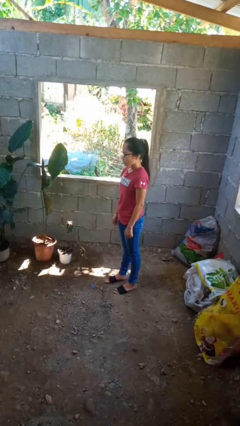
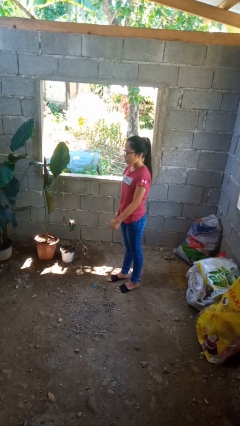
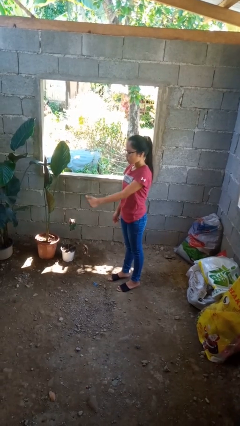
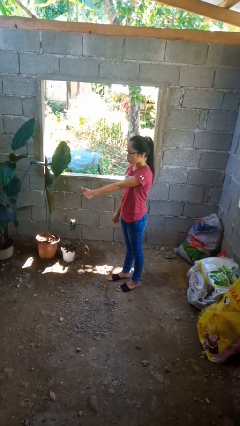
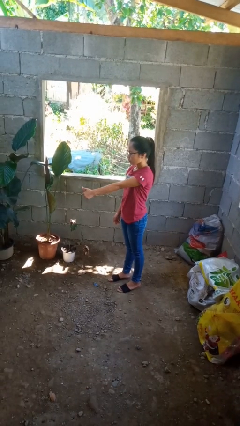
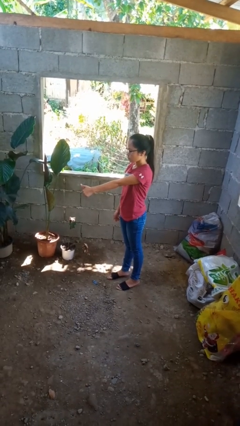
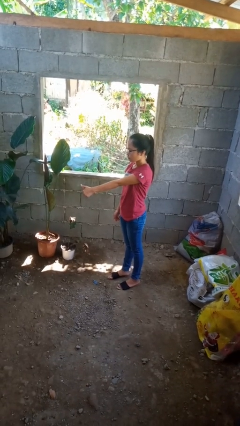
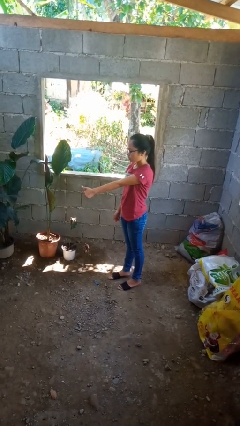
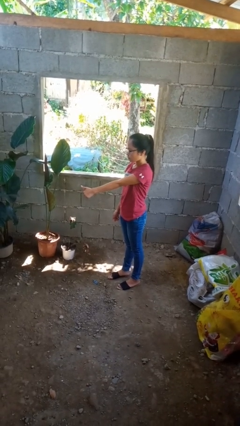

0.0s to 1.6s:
person gestures thumbs up

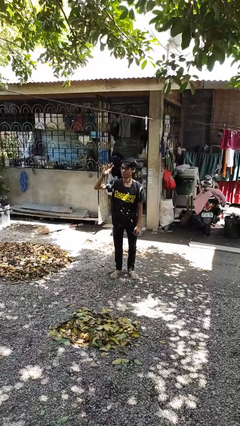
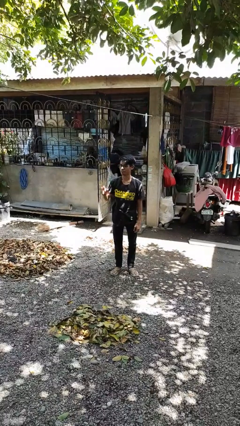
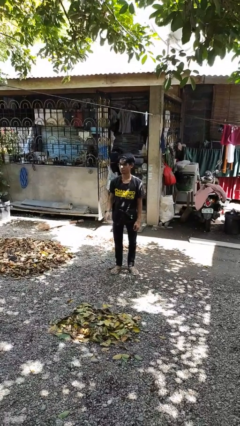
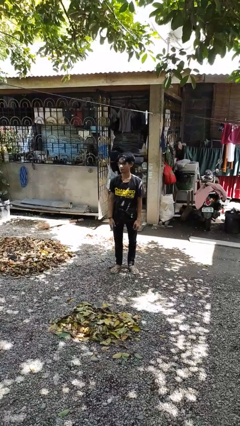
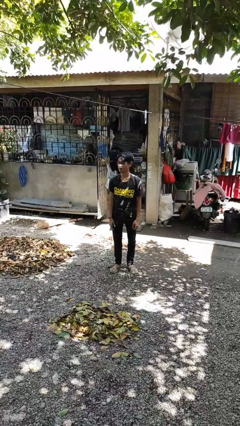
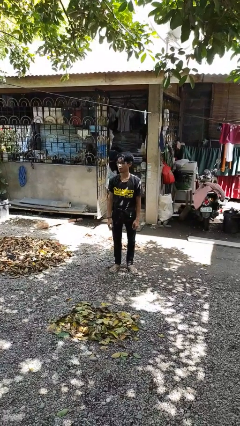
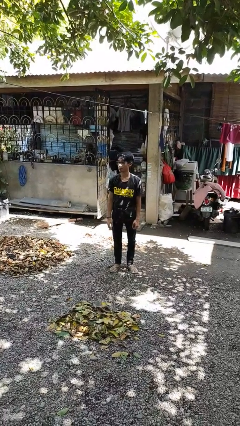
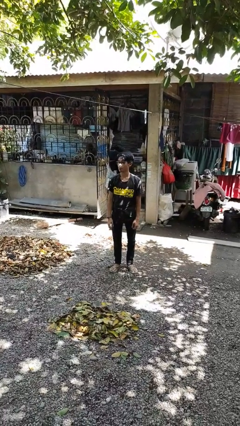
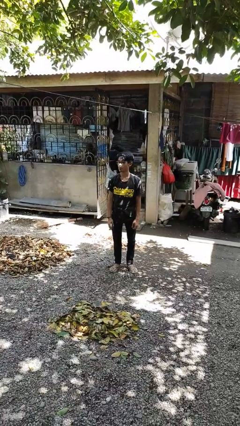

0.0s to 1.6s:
person gestures lower hand

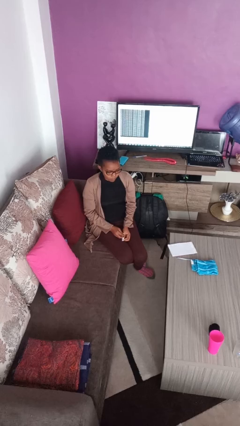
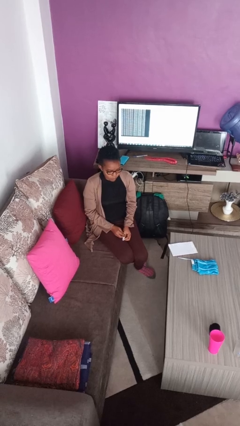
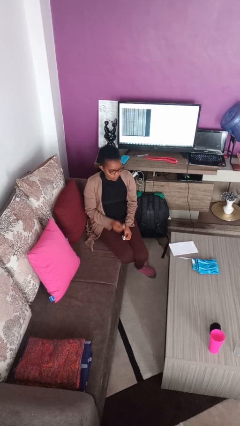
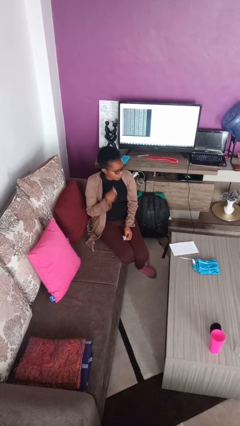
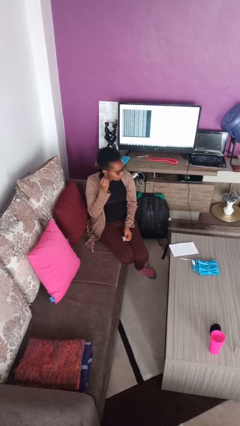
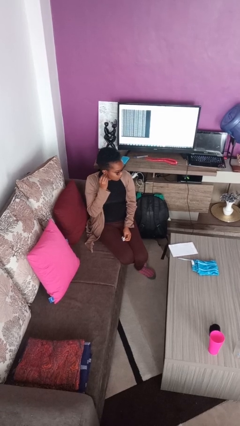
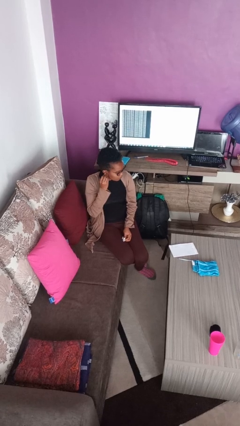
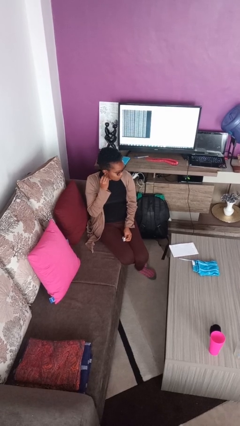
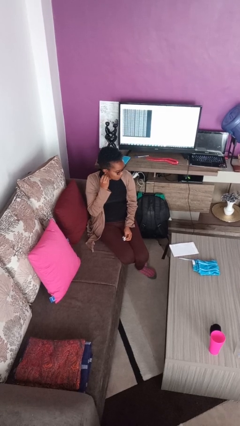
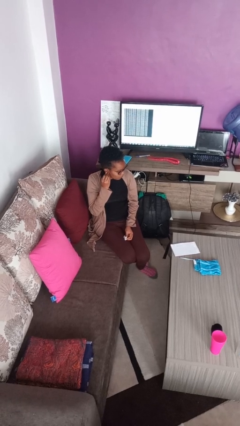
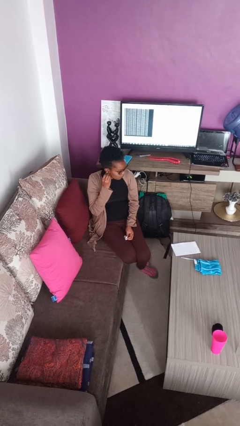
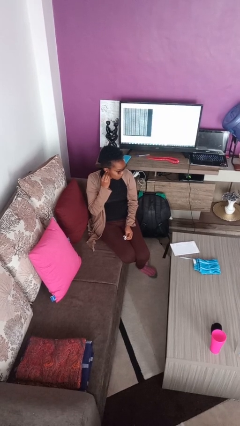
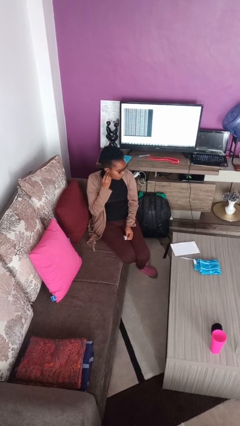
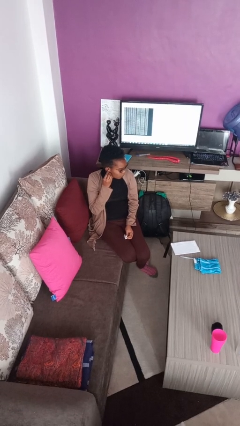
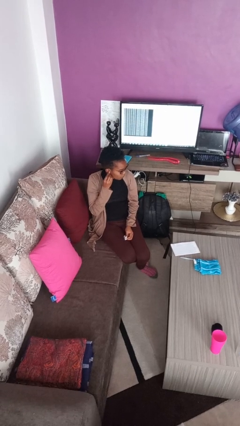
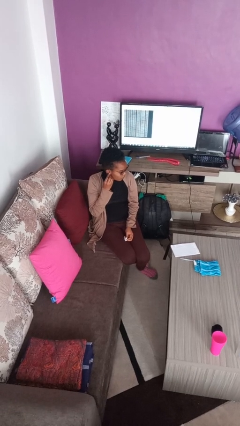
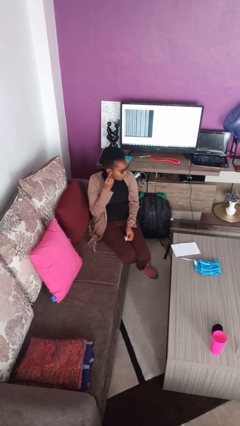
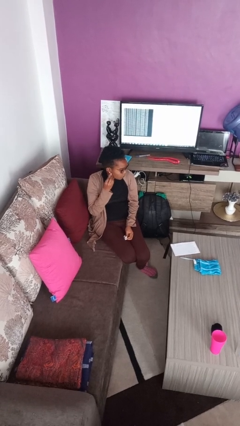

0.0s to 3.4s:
person puts on earrings

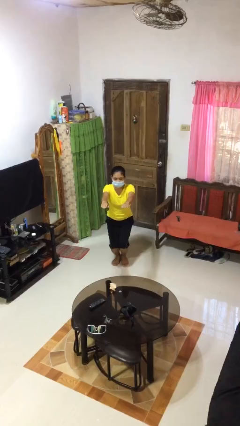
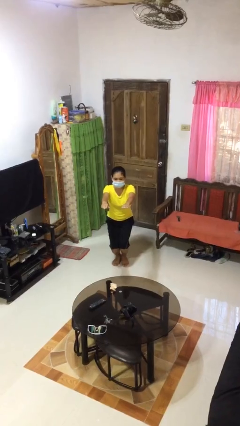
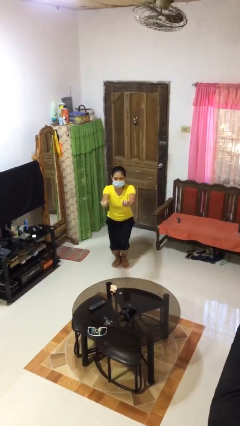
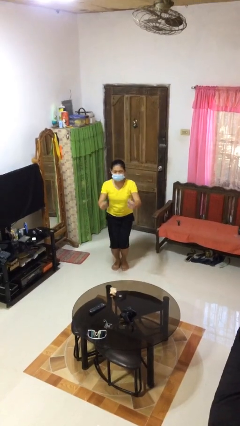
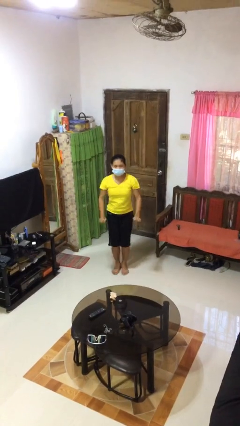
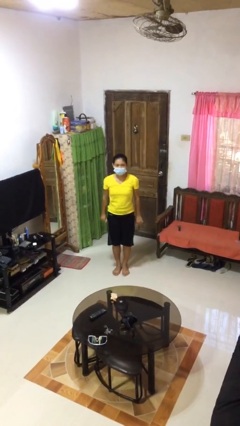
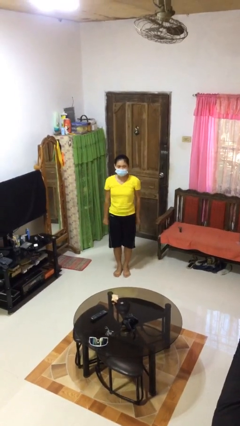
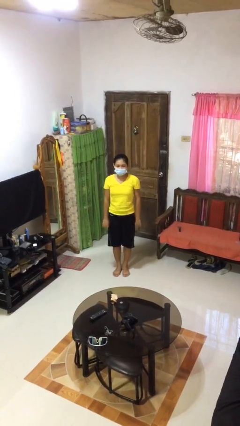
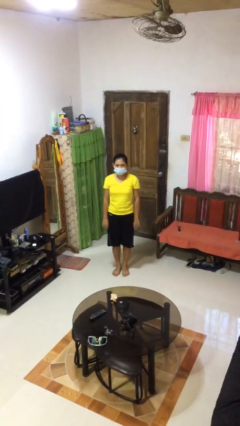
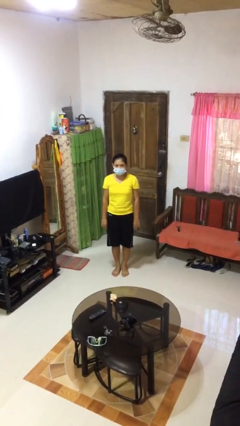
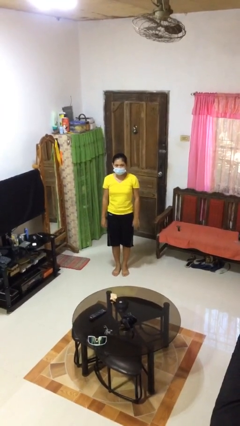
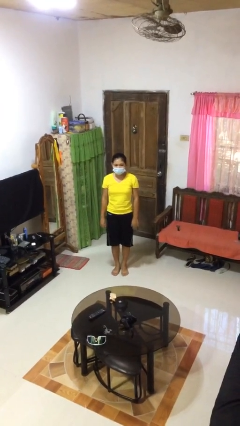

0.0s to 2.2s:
person stands up

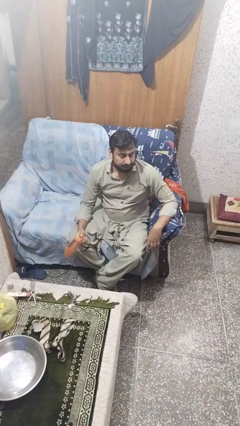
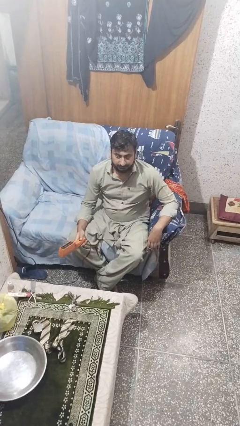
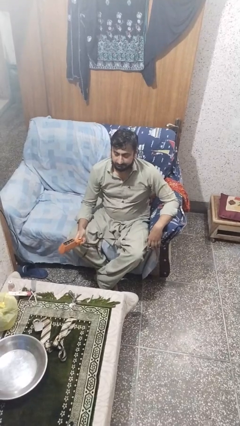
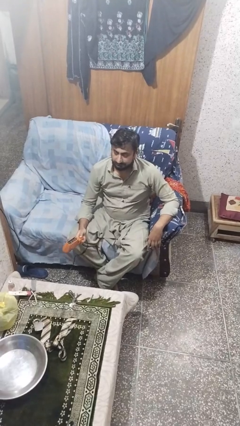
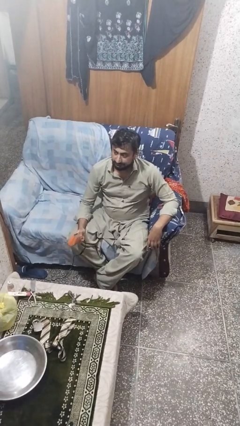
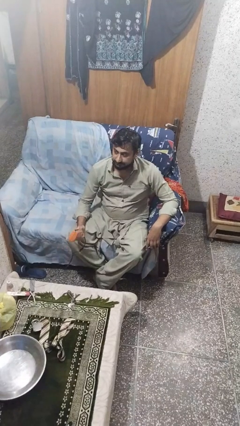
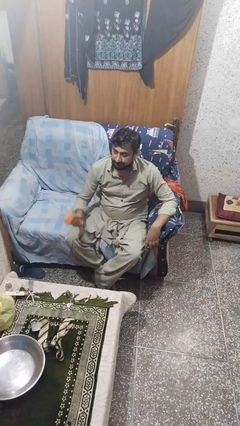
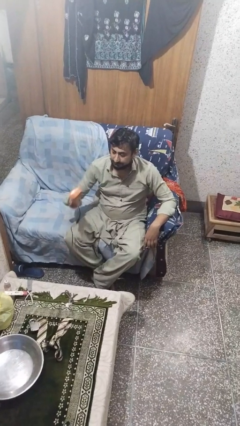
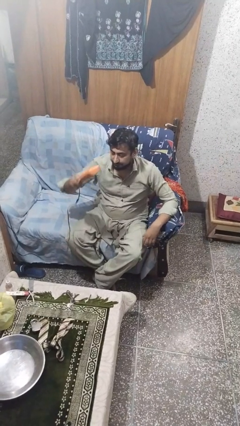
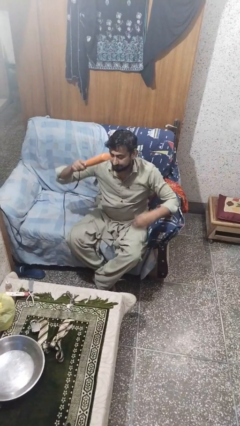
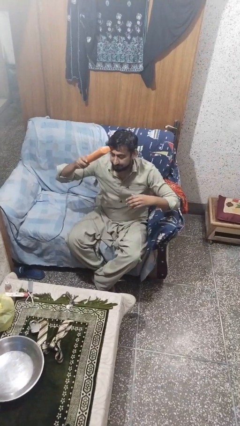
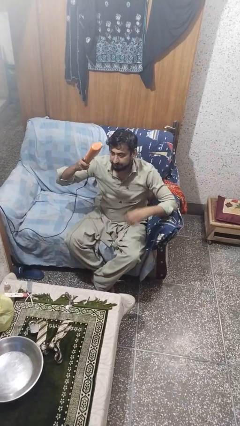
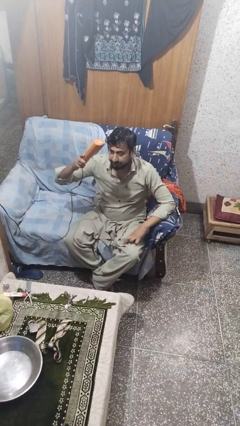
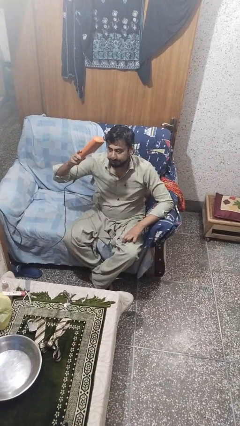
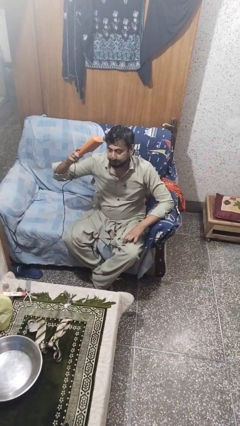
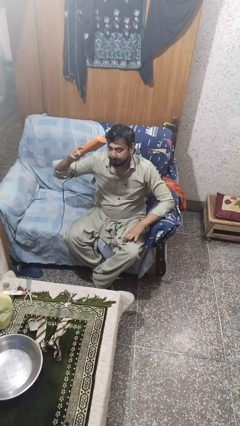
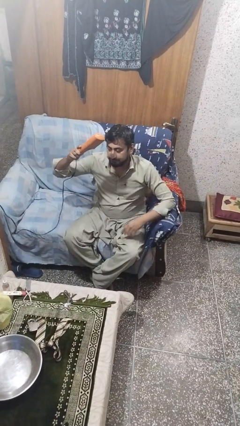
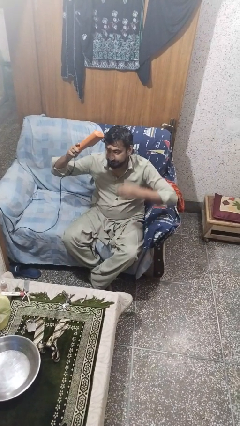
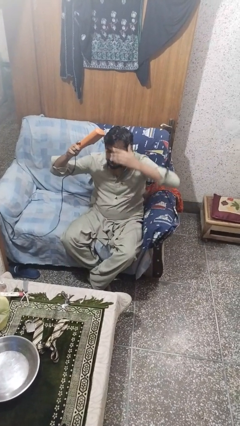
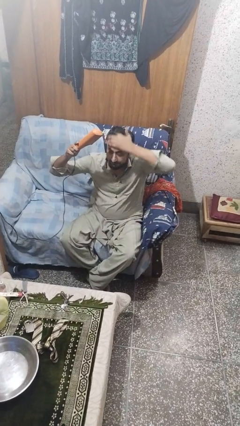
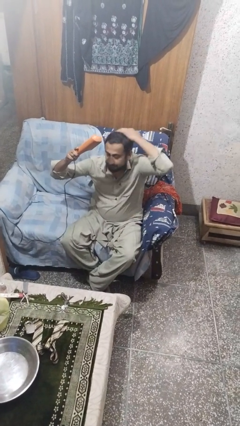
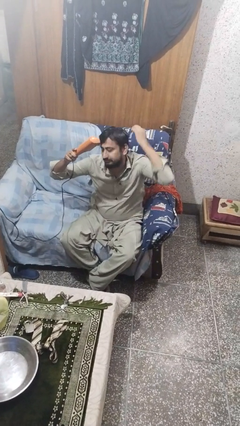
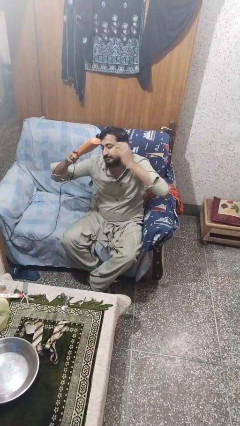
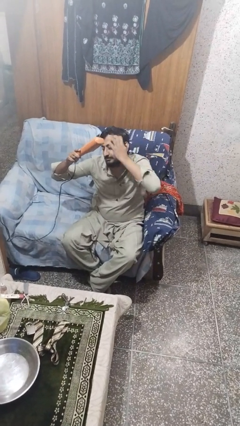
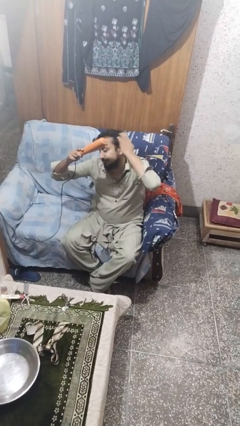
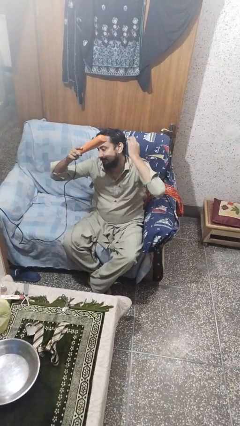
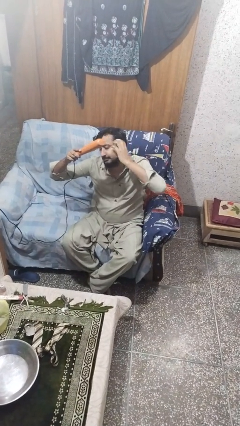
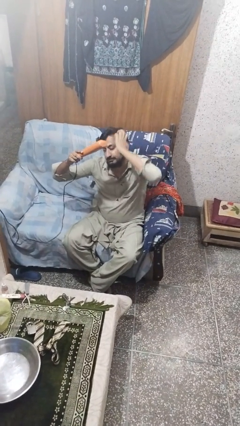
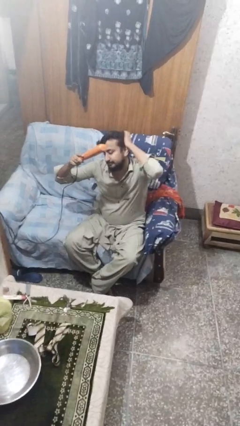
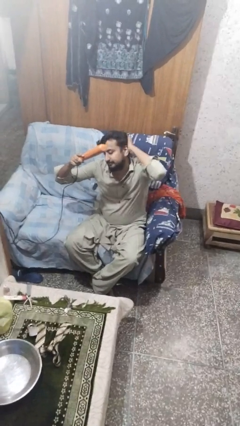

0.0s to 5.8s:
person dries hair with hairdryer

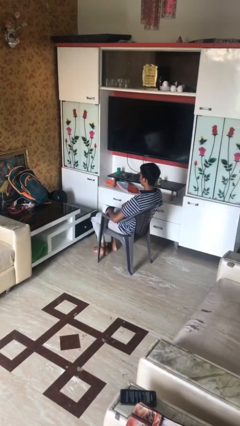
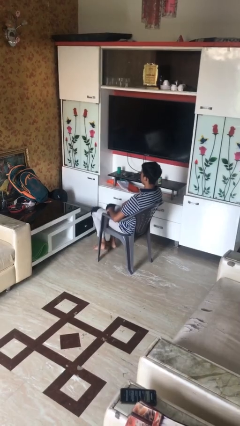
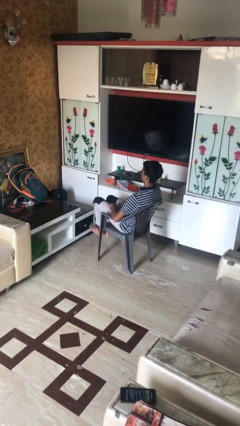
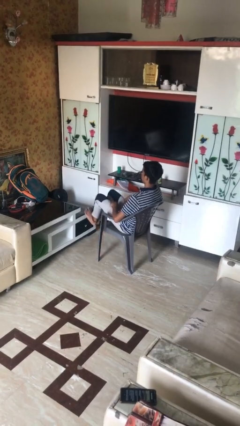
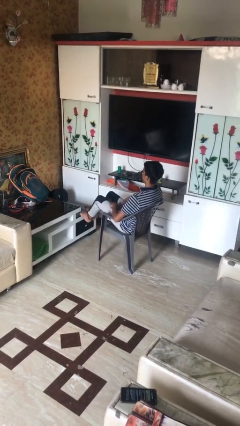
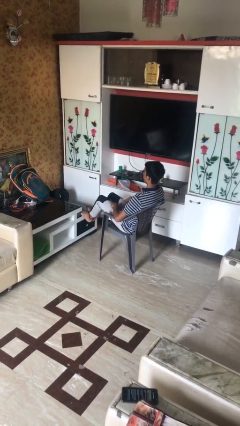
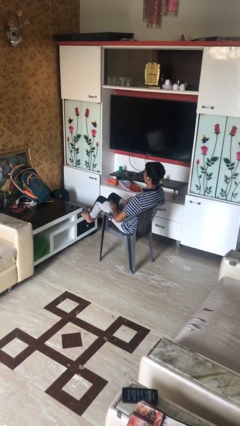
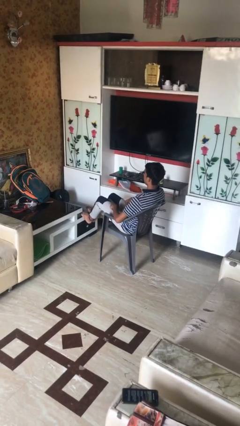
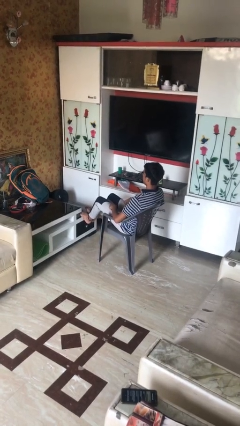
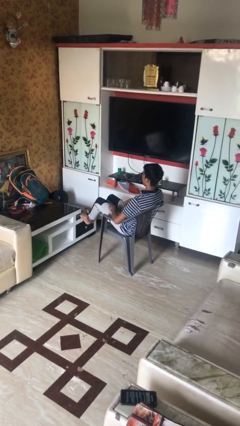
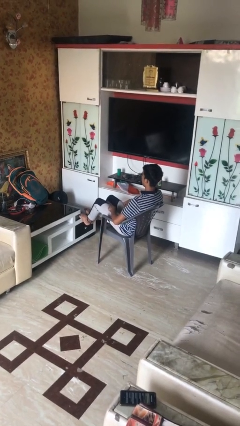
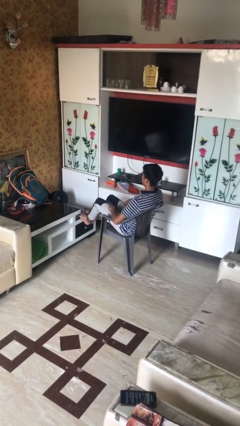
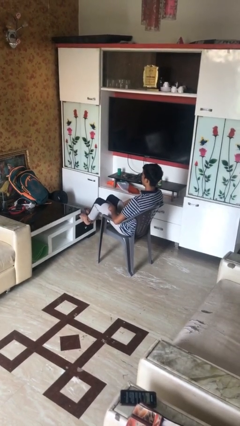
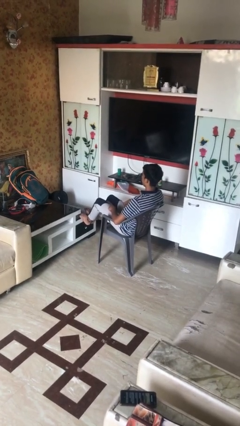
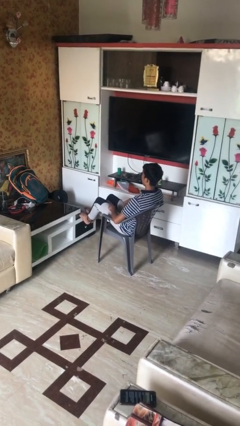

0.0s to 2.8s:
person puts feet up
